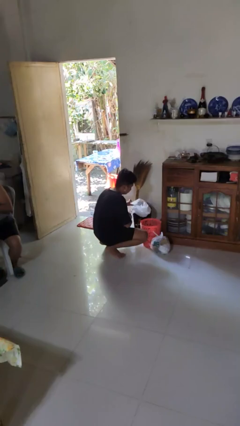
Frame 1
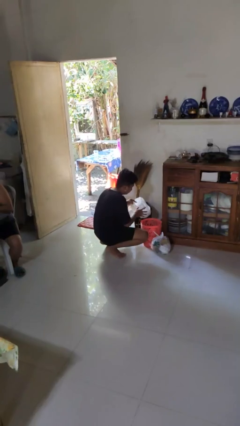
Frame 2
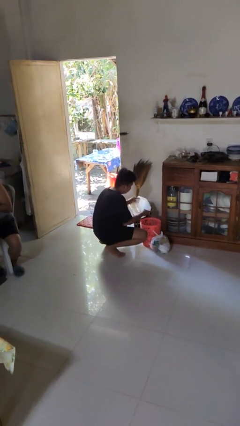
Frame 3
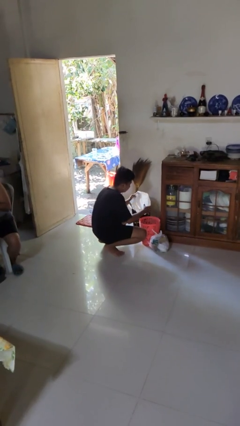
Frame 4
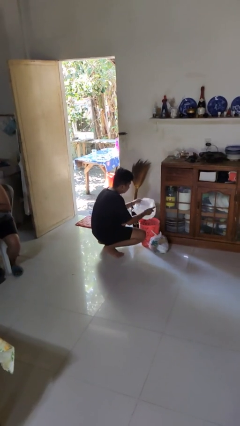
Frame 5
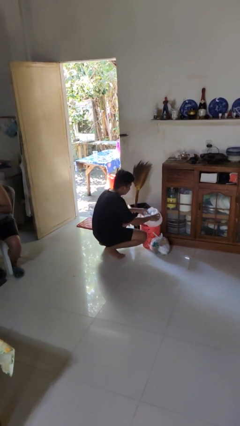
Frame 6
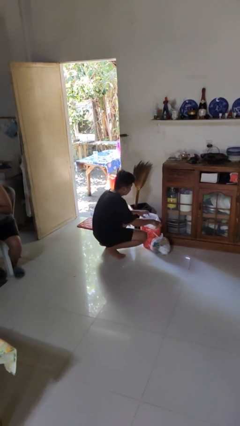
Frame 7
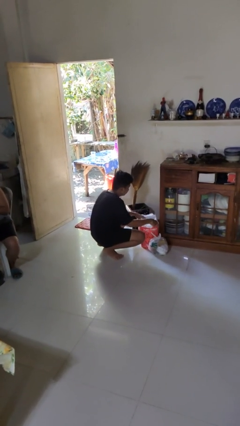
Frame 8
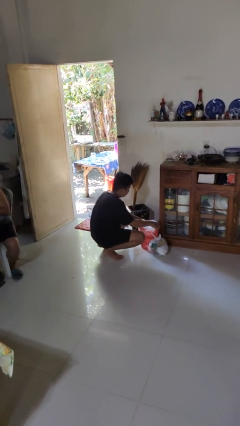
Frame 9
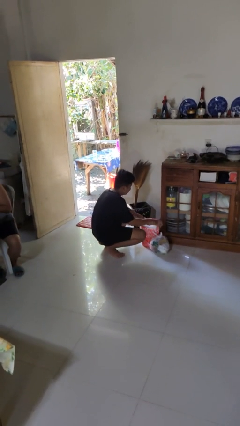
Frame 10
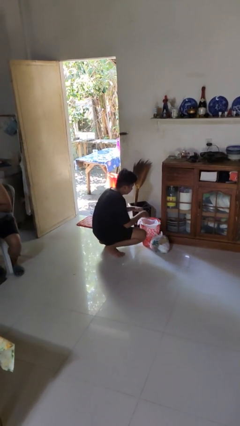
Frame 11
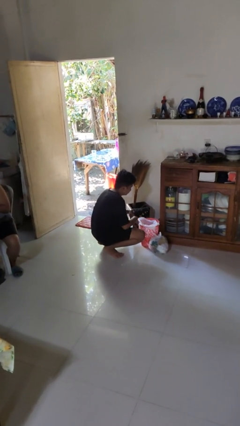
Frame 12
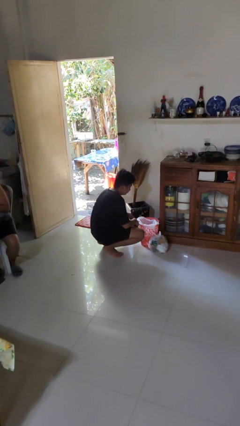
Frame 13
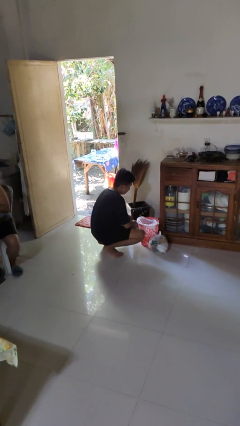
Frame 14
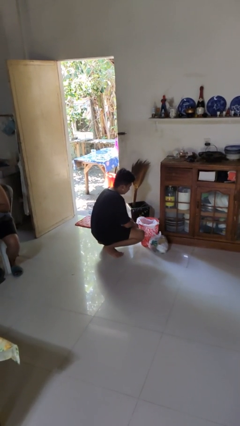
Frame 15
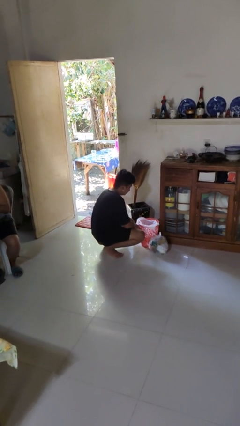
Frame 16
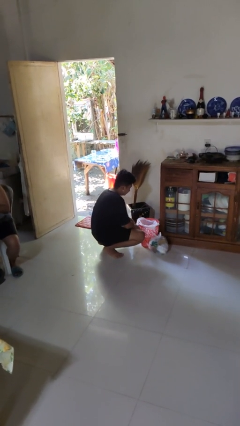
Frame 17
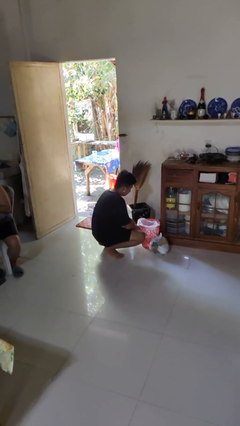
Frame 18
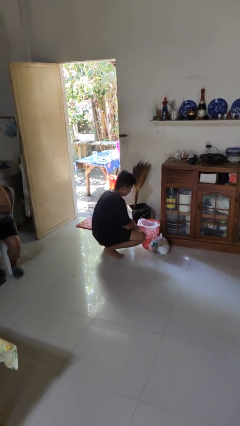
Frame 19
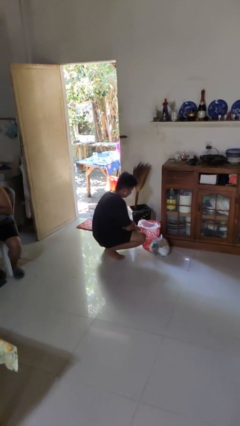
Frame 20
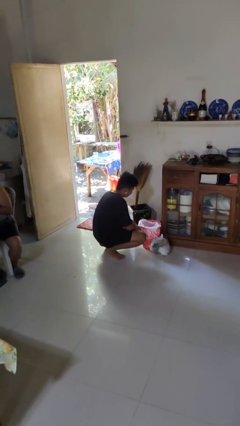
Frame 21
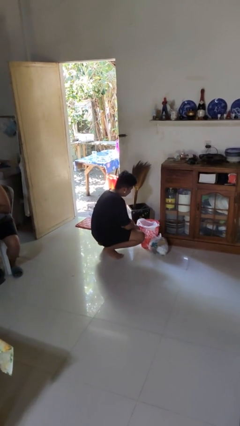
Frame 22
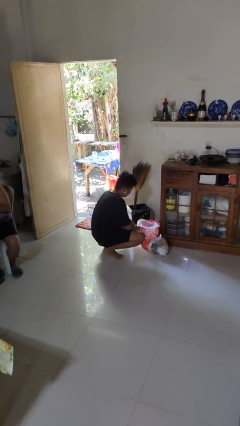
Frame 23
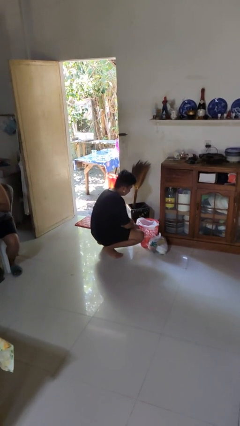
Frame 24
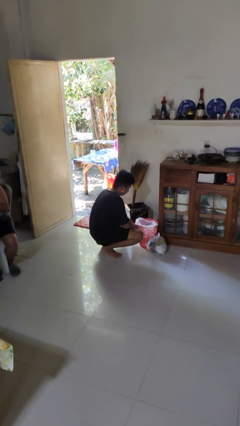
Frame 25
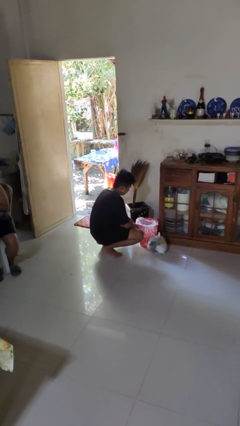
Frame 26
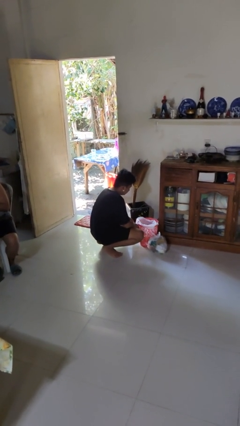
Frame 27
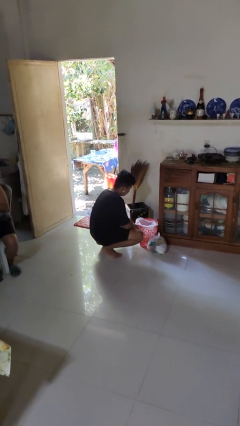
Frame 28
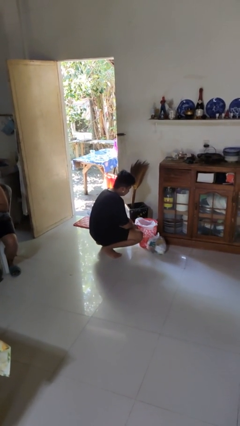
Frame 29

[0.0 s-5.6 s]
person inserts trashbag into trashcan

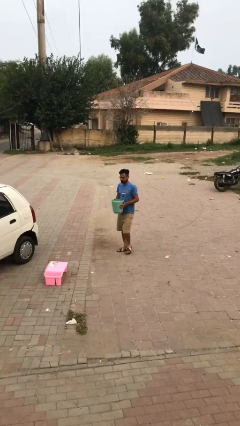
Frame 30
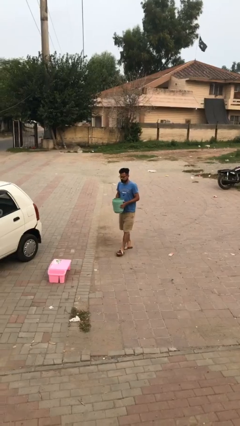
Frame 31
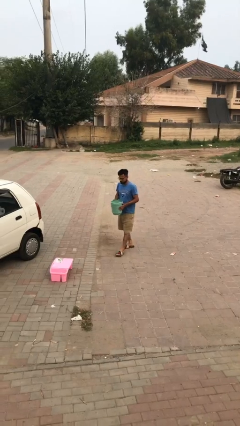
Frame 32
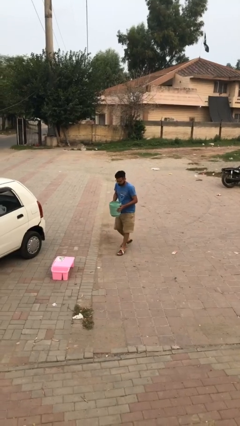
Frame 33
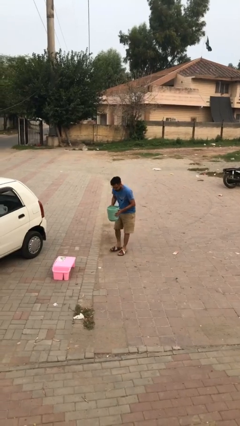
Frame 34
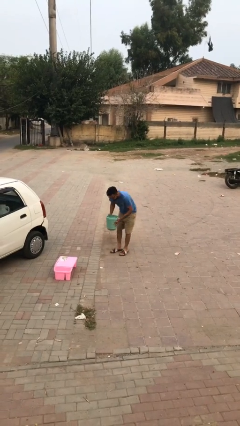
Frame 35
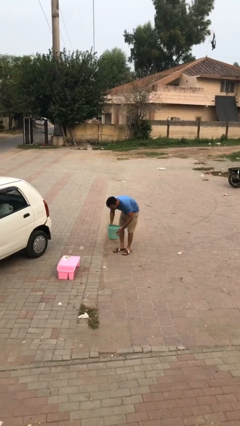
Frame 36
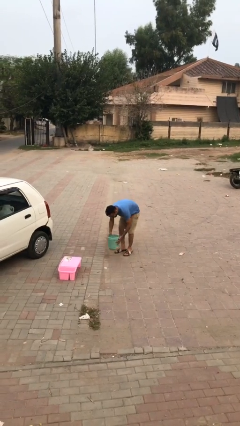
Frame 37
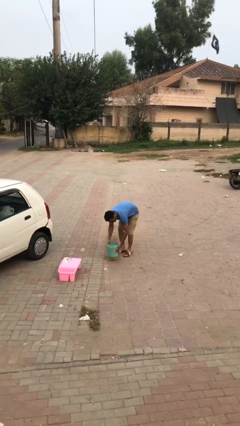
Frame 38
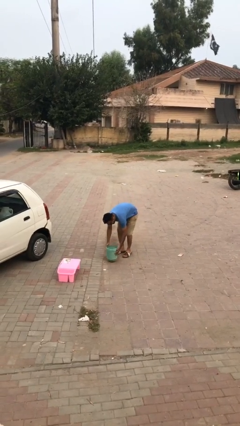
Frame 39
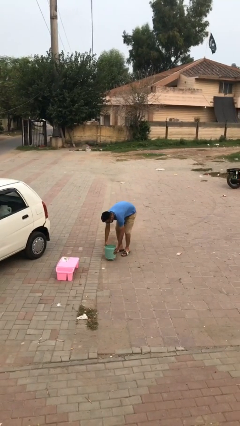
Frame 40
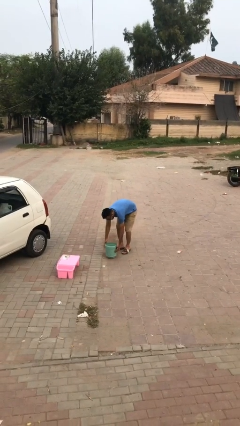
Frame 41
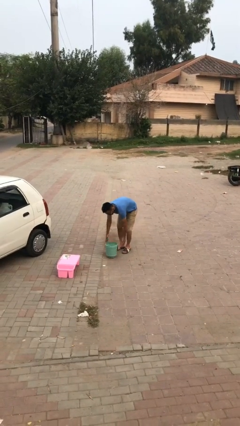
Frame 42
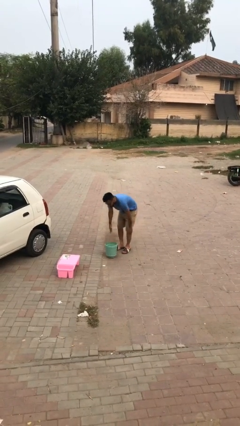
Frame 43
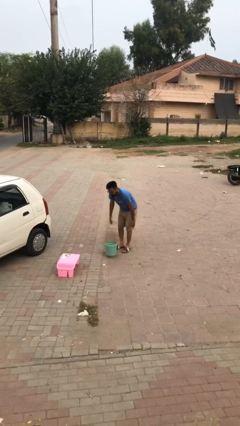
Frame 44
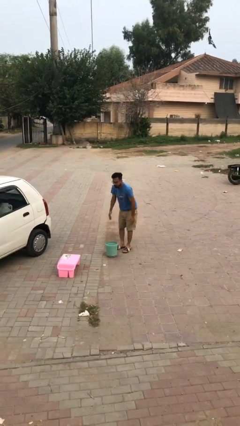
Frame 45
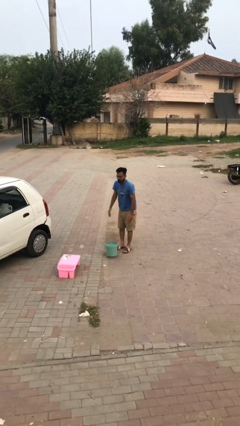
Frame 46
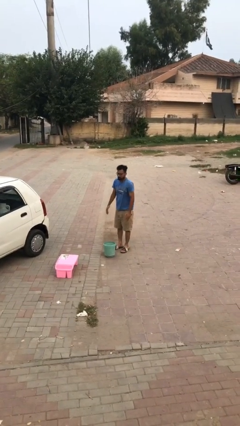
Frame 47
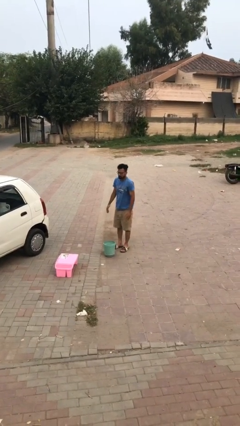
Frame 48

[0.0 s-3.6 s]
person puts down object on floor

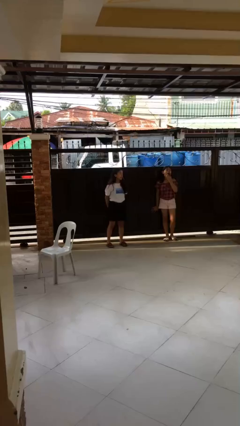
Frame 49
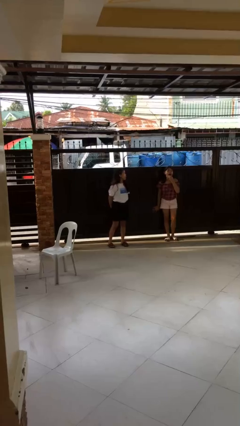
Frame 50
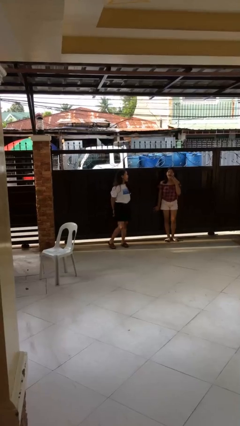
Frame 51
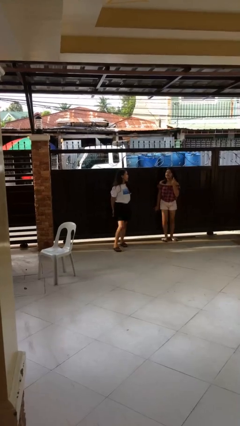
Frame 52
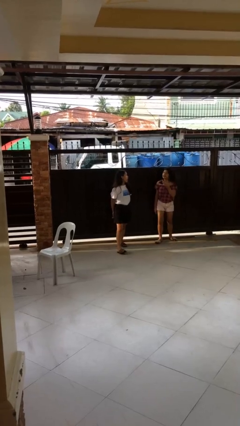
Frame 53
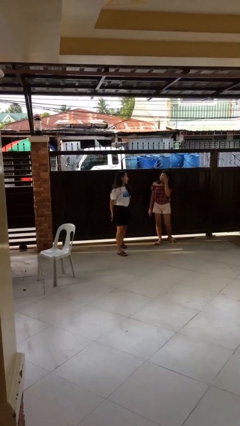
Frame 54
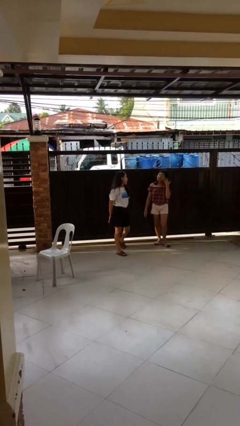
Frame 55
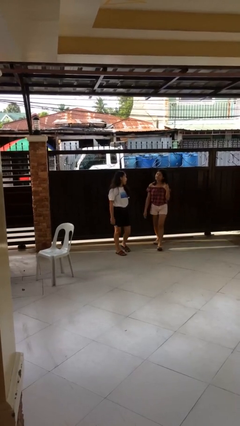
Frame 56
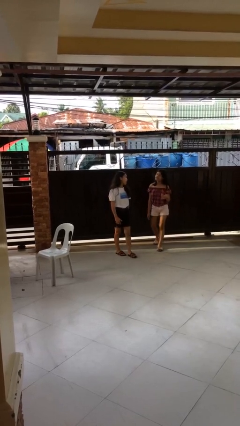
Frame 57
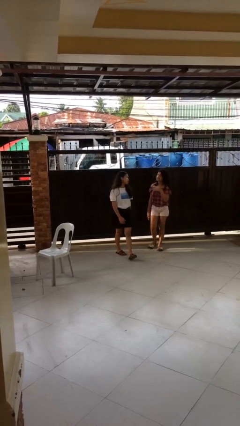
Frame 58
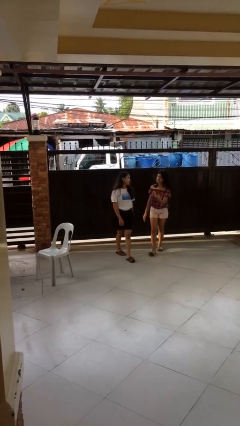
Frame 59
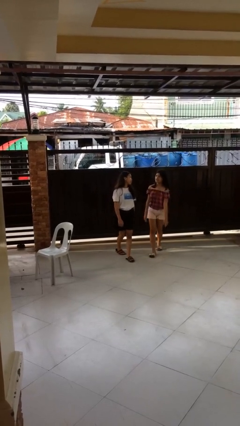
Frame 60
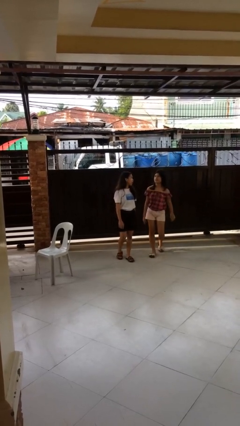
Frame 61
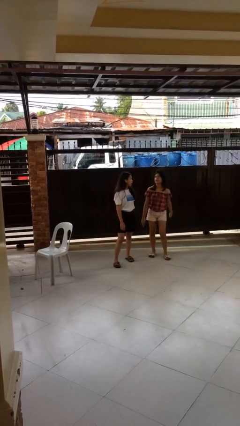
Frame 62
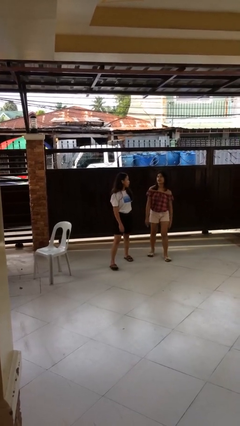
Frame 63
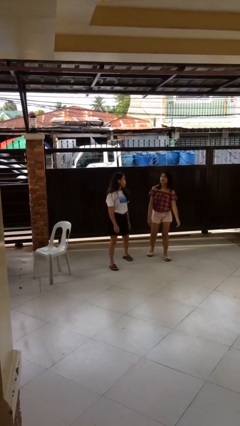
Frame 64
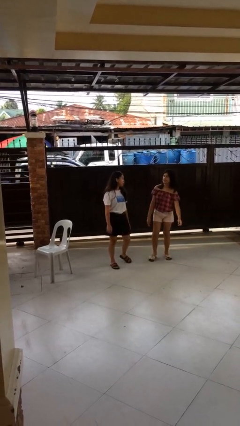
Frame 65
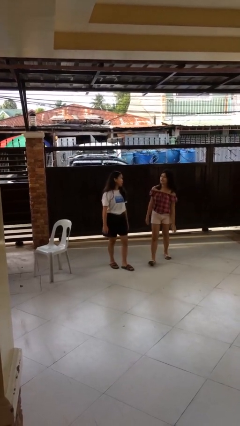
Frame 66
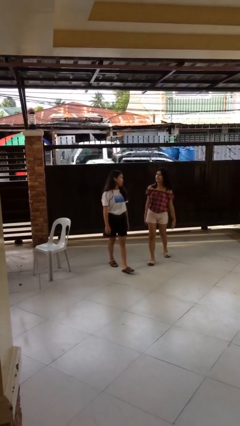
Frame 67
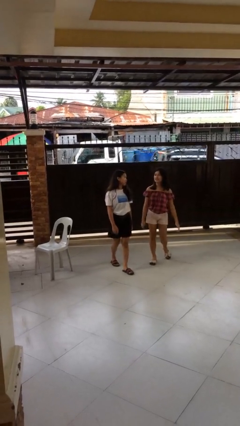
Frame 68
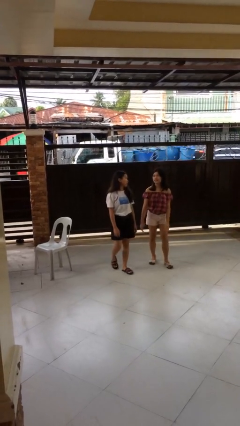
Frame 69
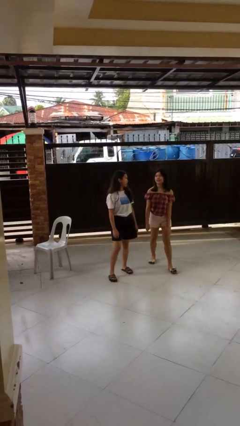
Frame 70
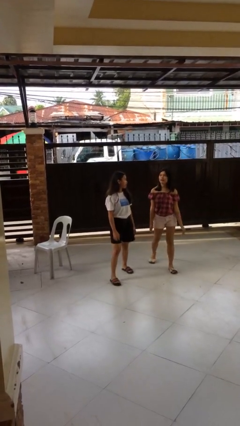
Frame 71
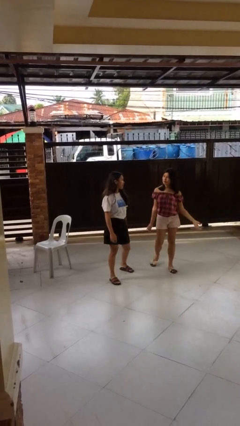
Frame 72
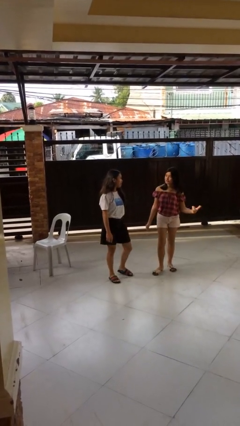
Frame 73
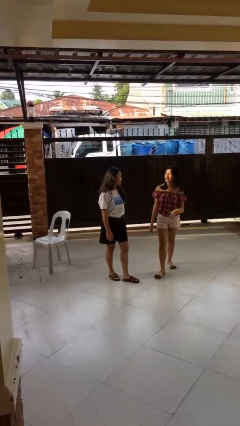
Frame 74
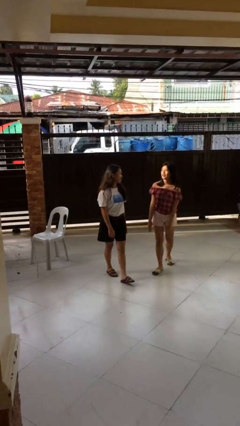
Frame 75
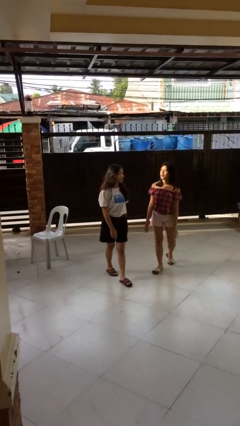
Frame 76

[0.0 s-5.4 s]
person talks to person

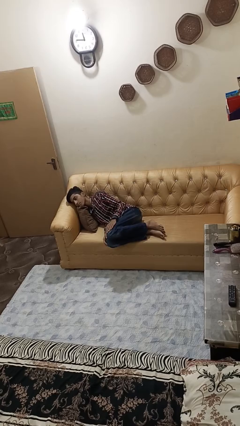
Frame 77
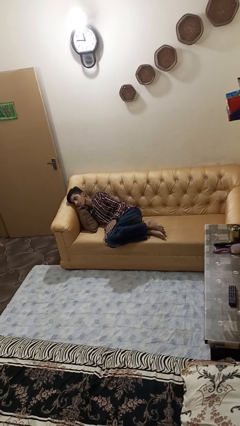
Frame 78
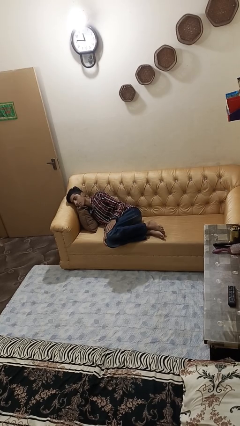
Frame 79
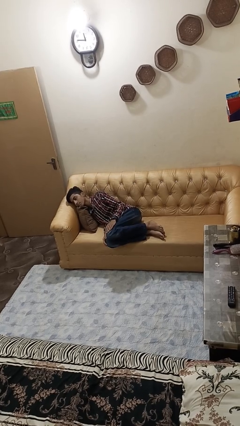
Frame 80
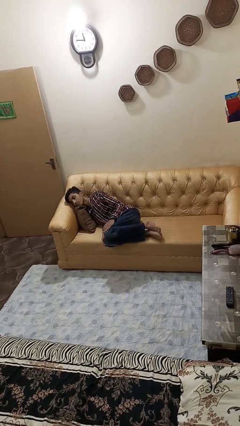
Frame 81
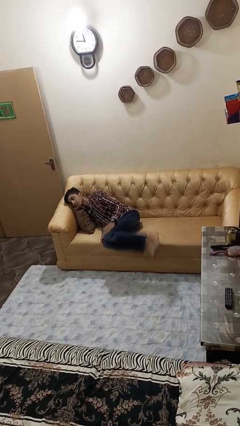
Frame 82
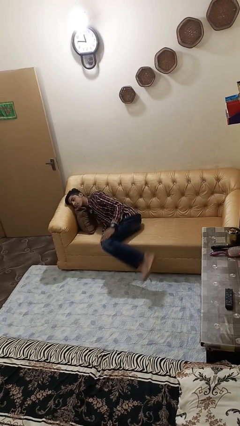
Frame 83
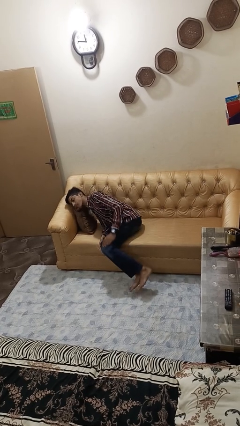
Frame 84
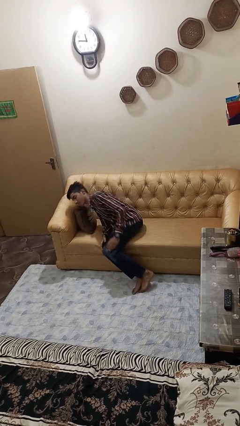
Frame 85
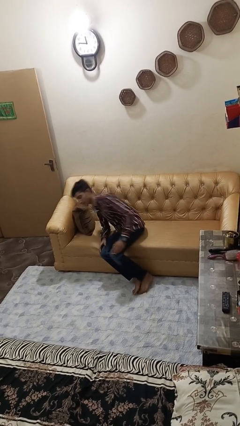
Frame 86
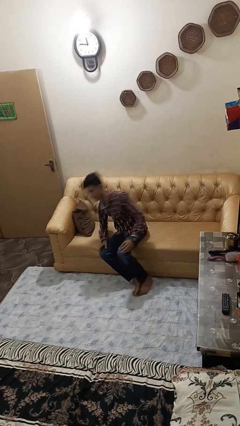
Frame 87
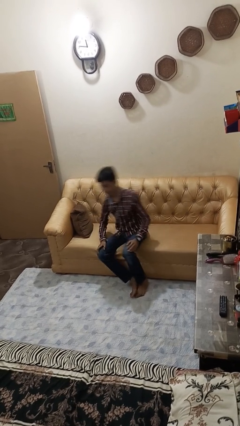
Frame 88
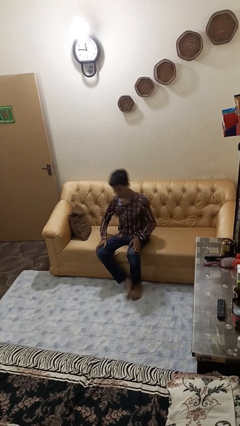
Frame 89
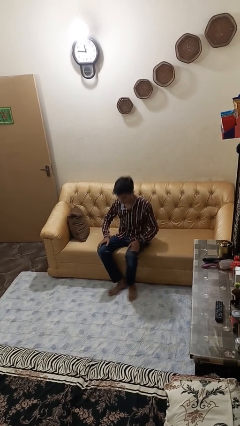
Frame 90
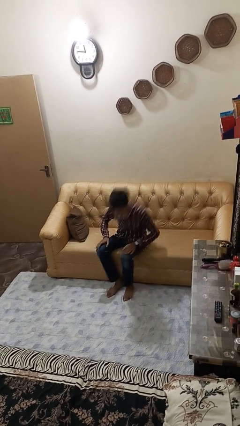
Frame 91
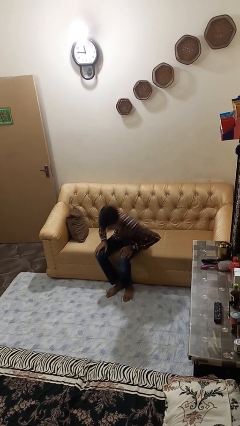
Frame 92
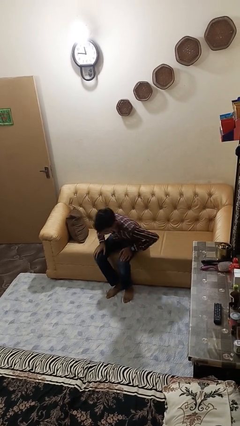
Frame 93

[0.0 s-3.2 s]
person stands up
